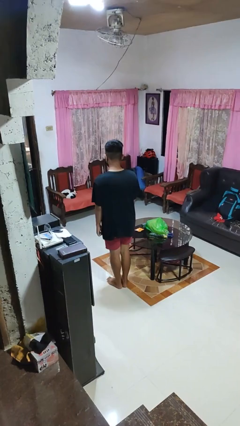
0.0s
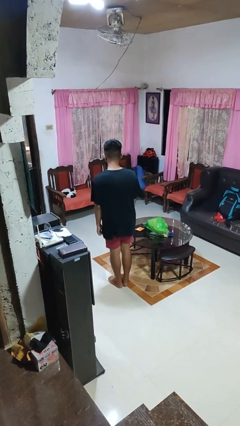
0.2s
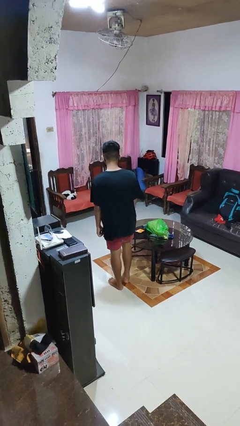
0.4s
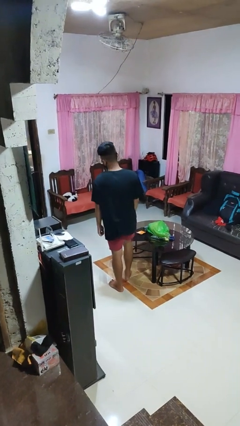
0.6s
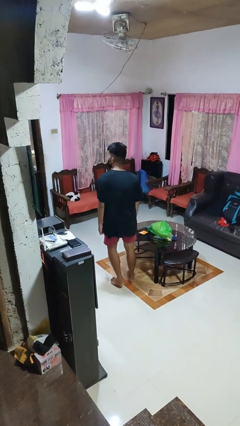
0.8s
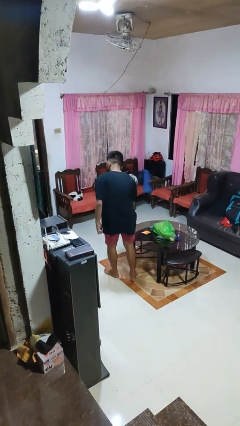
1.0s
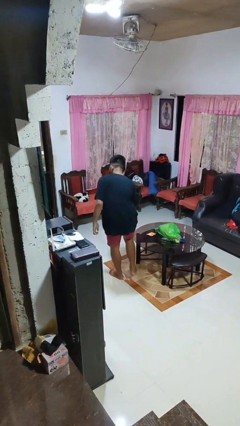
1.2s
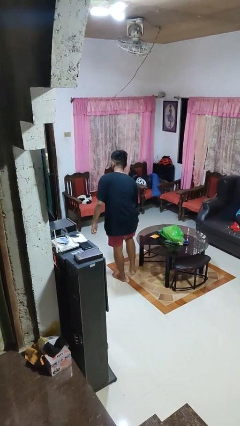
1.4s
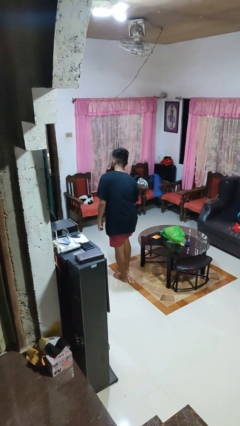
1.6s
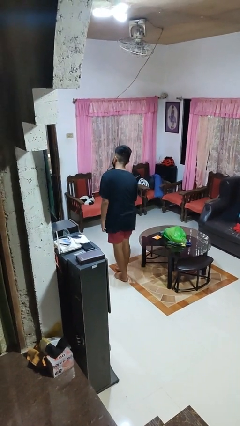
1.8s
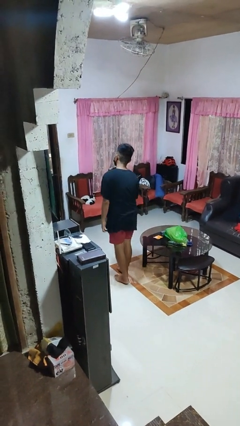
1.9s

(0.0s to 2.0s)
person bumps into table

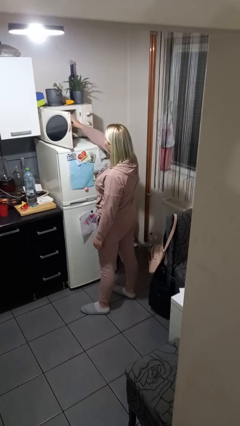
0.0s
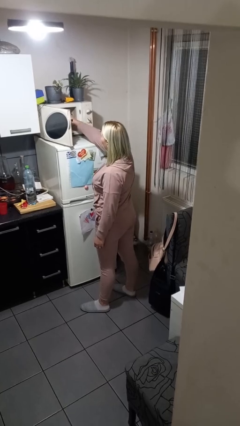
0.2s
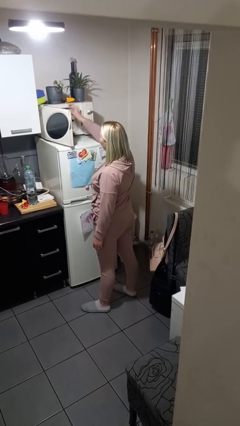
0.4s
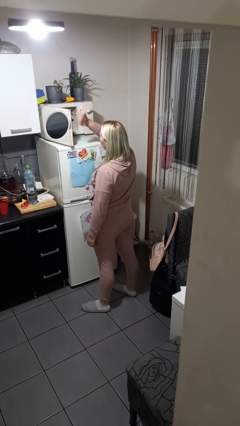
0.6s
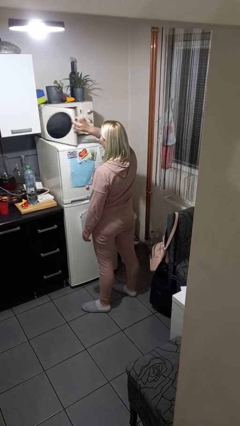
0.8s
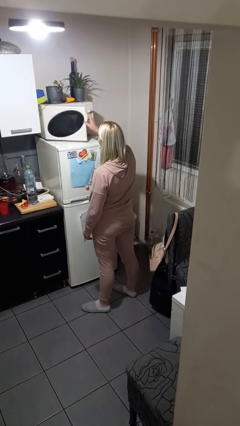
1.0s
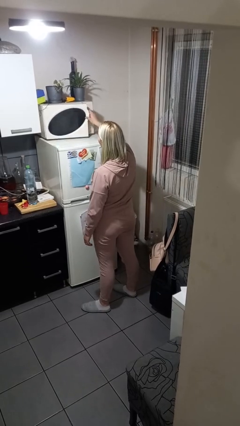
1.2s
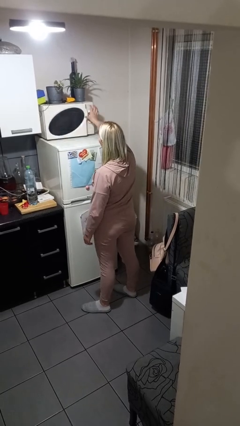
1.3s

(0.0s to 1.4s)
person puts object into microwave

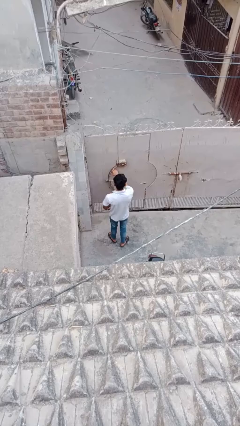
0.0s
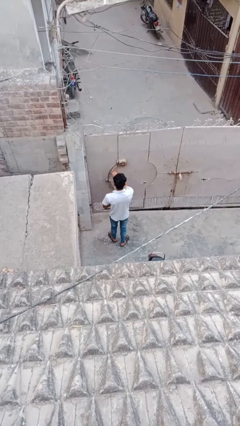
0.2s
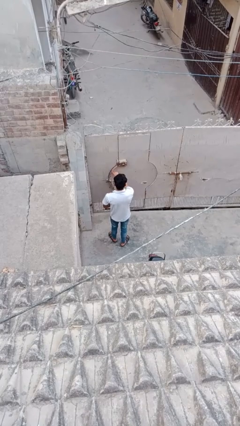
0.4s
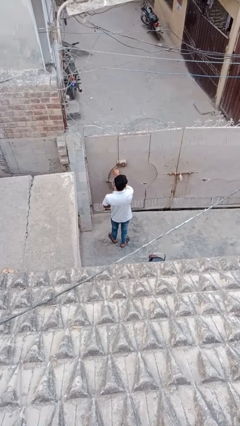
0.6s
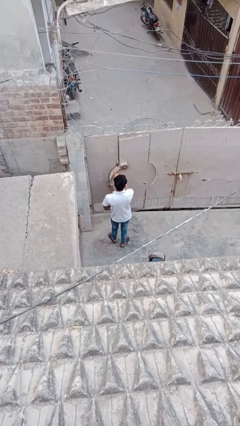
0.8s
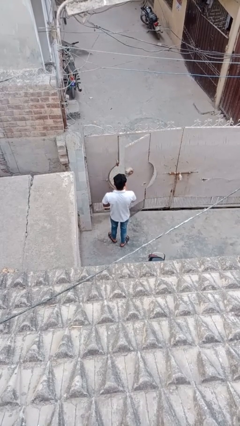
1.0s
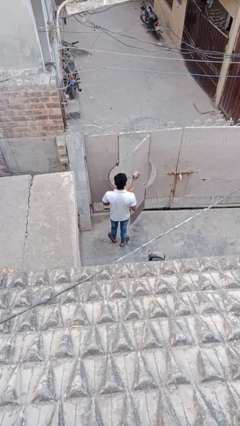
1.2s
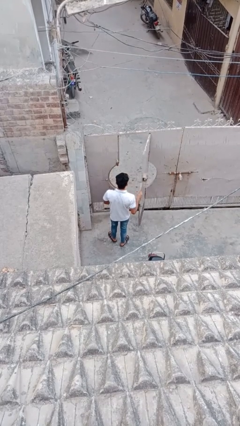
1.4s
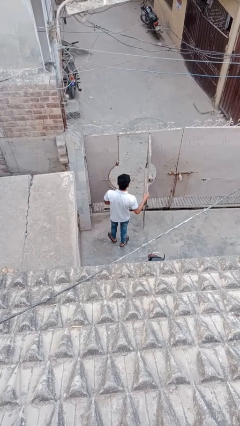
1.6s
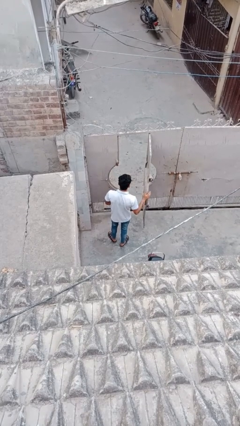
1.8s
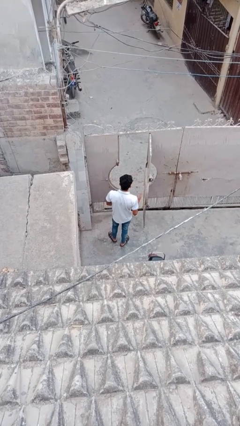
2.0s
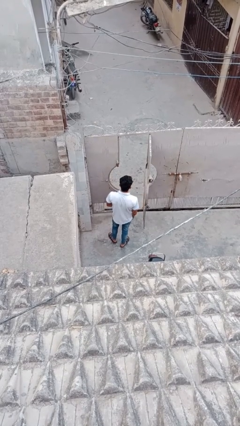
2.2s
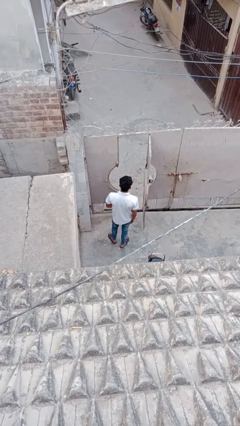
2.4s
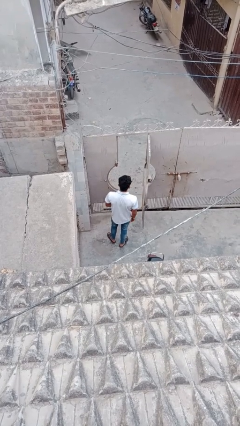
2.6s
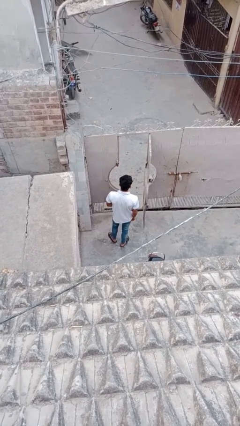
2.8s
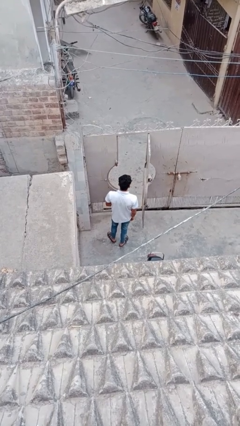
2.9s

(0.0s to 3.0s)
person opens facility door

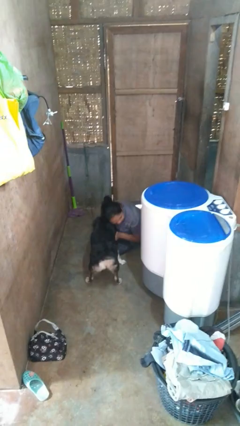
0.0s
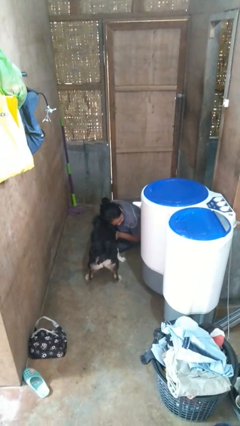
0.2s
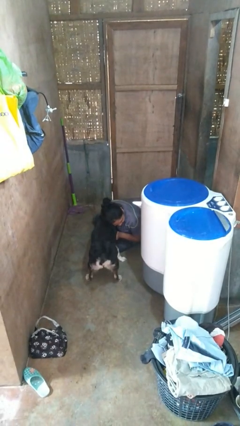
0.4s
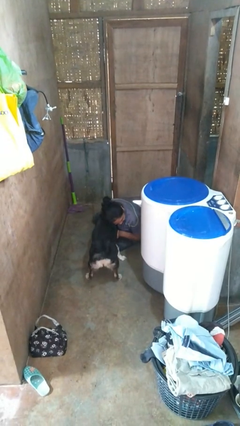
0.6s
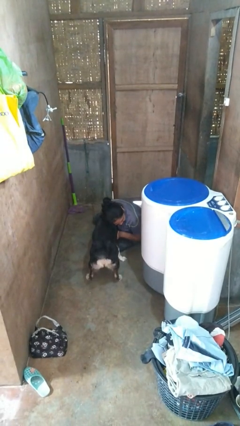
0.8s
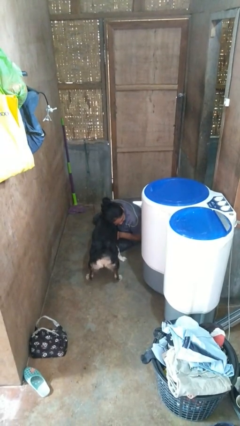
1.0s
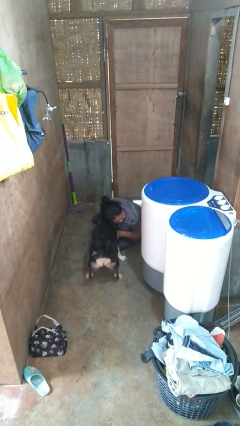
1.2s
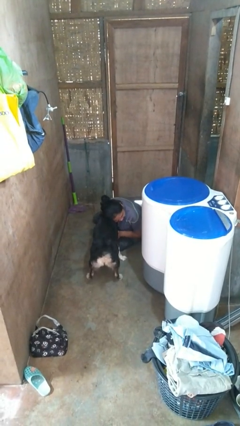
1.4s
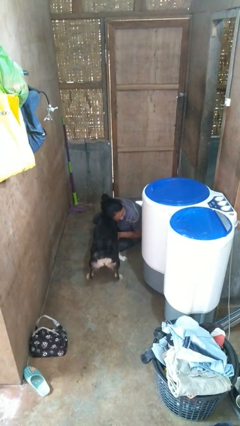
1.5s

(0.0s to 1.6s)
person hugs dog

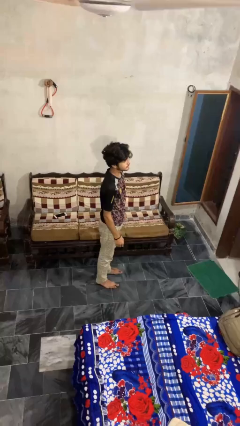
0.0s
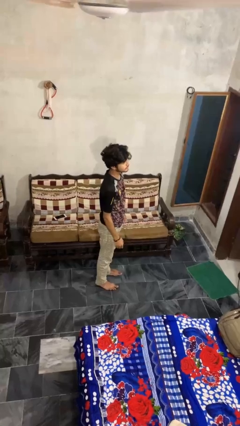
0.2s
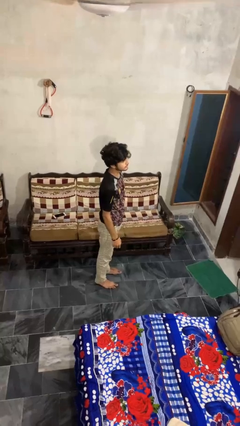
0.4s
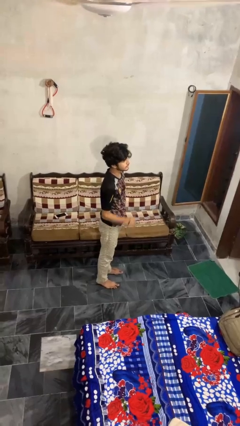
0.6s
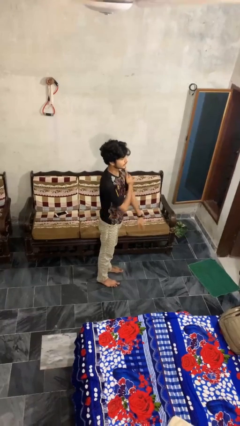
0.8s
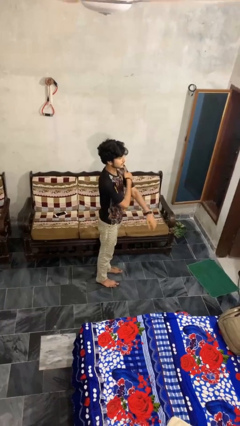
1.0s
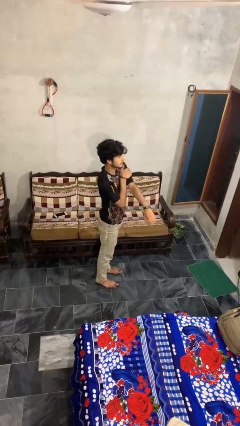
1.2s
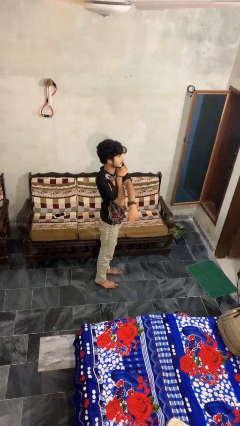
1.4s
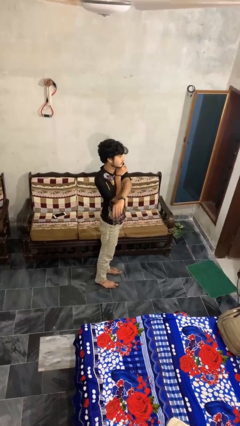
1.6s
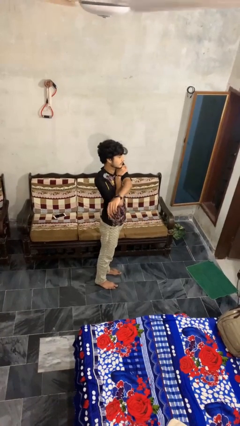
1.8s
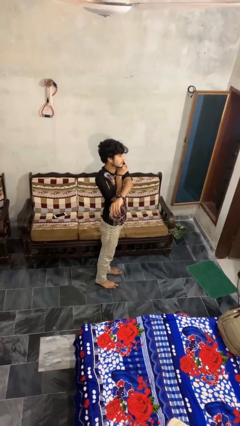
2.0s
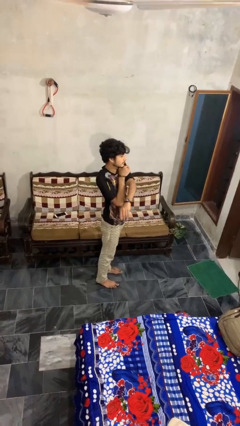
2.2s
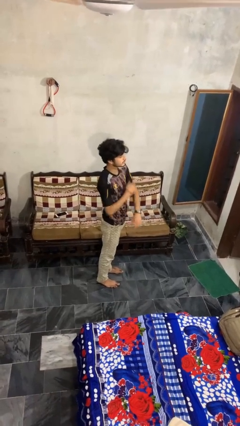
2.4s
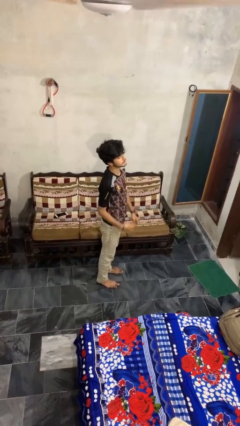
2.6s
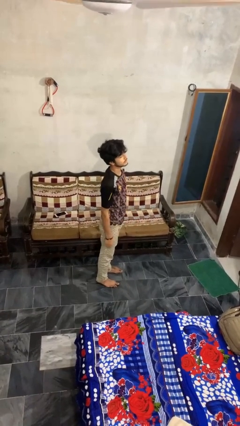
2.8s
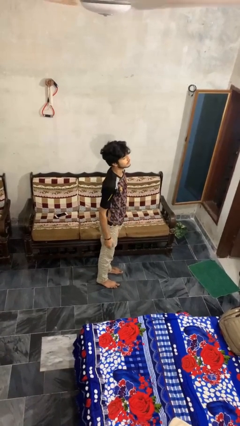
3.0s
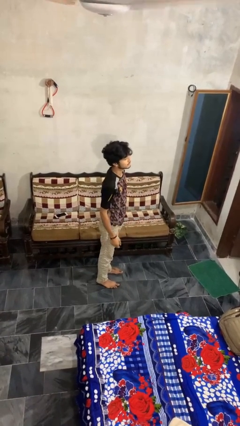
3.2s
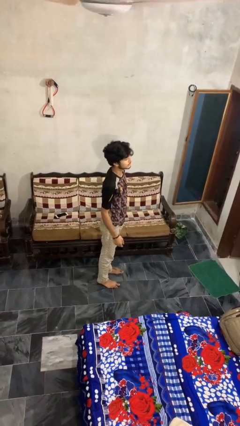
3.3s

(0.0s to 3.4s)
person stretches arms to side

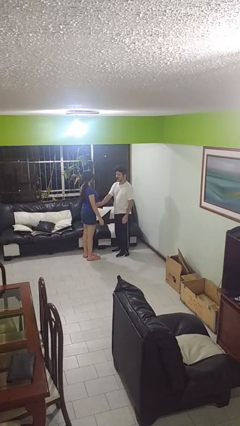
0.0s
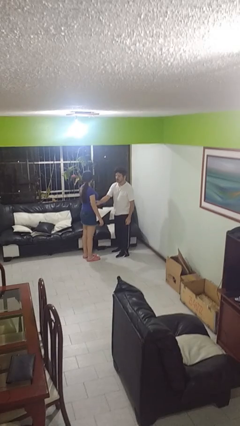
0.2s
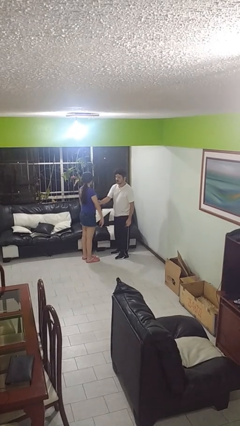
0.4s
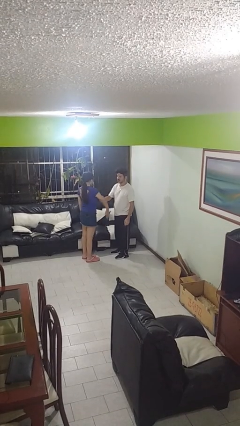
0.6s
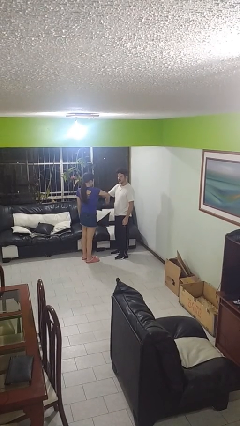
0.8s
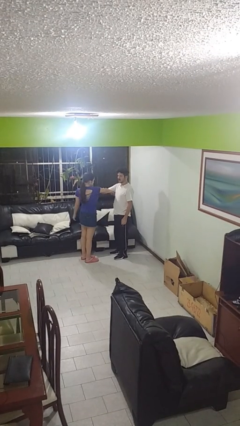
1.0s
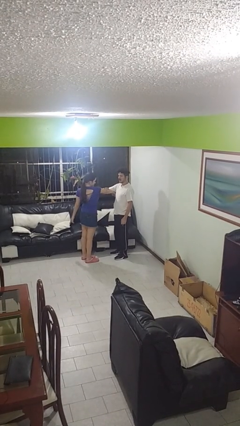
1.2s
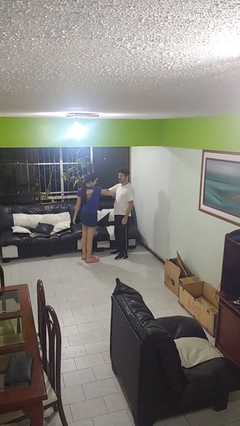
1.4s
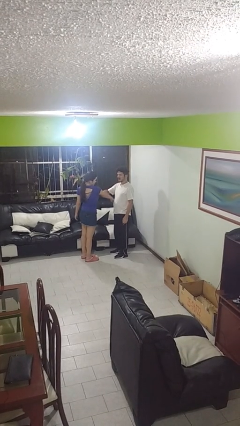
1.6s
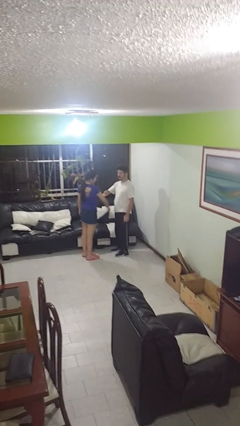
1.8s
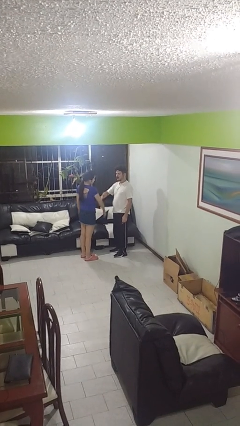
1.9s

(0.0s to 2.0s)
person grabs person by bicep

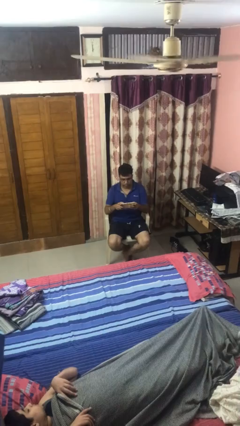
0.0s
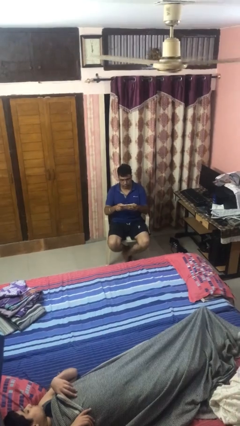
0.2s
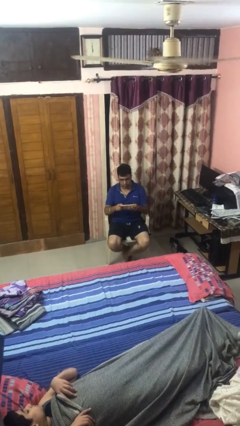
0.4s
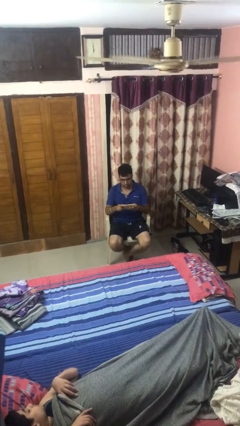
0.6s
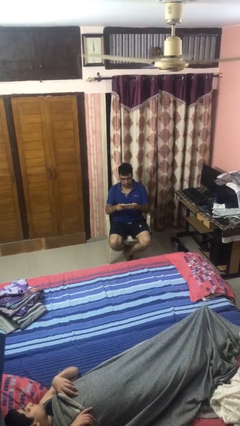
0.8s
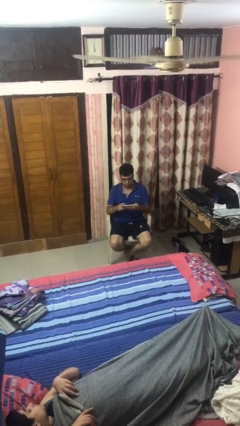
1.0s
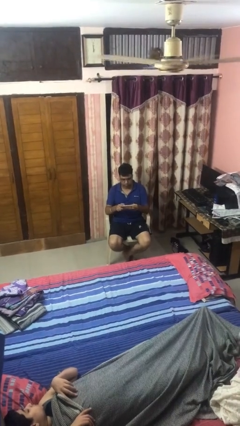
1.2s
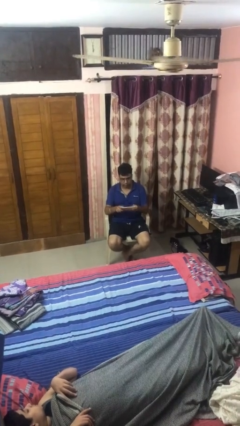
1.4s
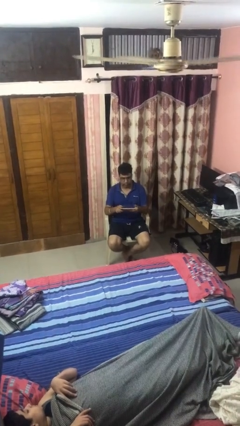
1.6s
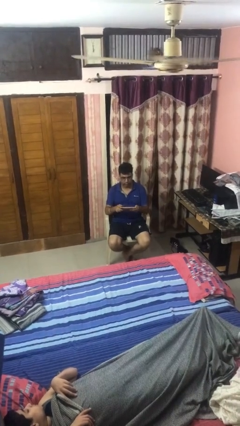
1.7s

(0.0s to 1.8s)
person interacts with tablet

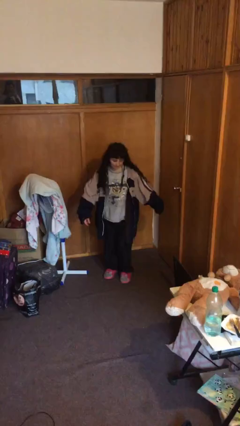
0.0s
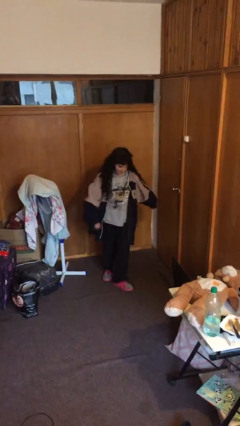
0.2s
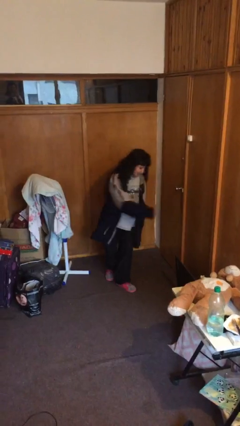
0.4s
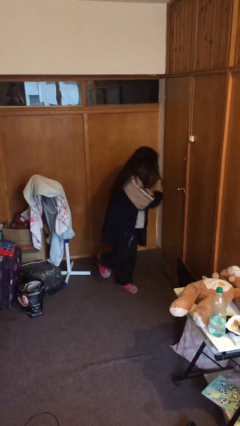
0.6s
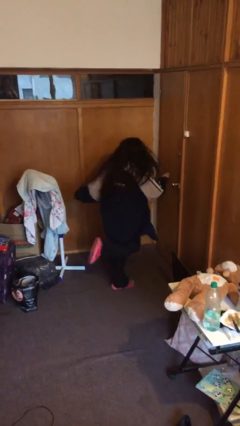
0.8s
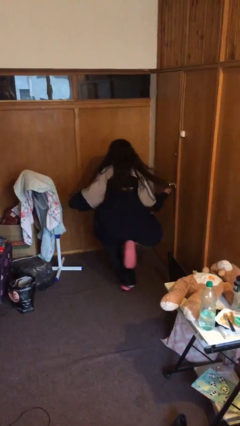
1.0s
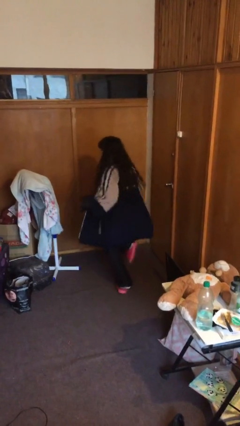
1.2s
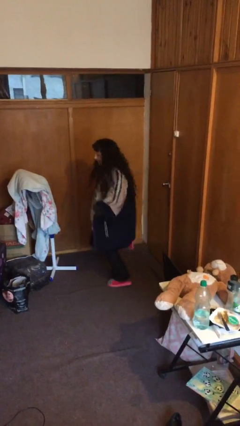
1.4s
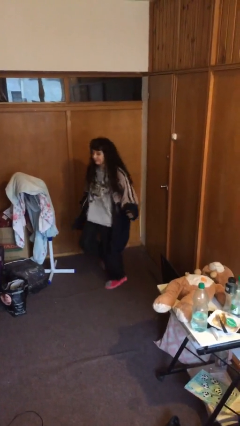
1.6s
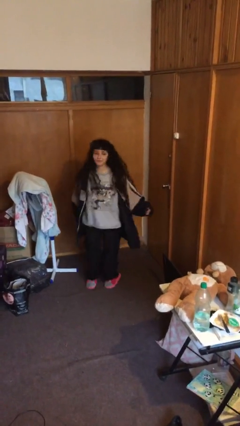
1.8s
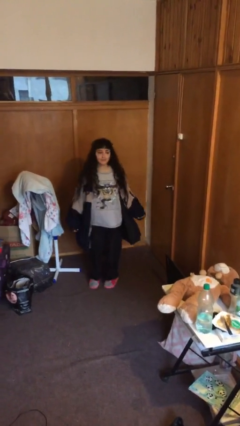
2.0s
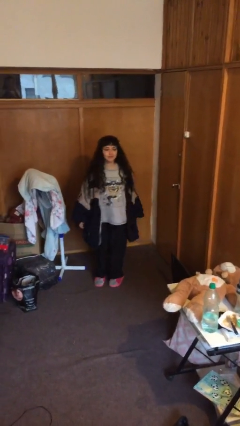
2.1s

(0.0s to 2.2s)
person twirls
